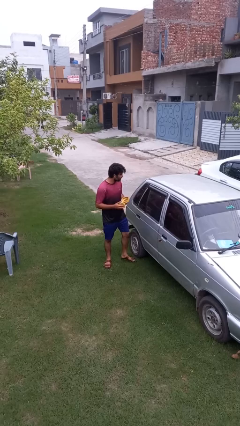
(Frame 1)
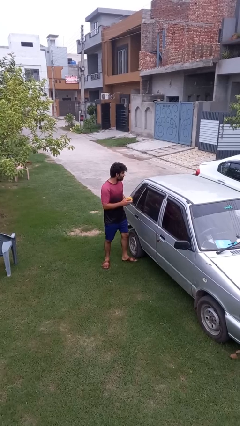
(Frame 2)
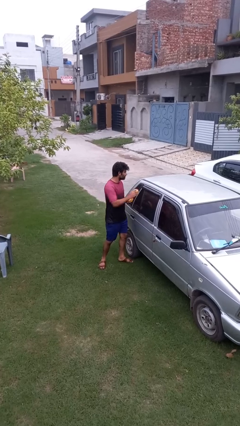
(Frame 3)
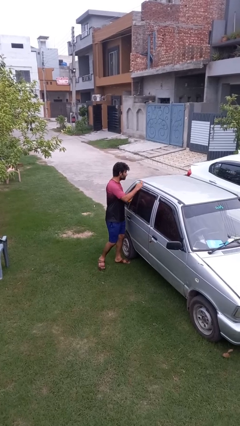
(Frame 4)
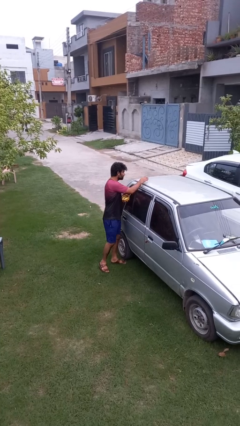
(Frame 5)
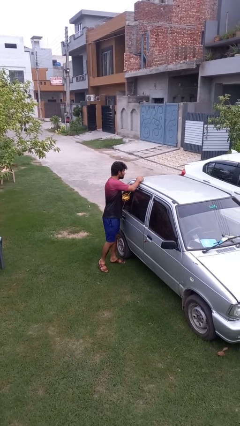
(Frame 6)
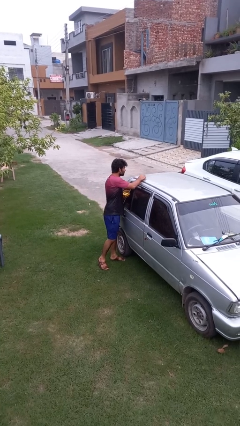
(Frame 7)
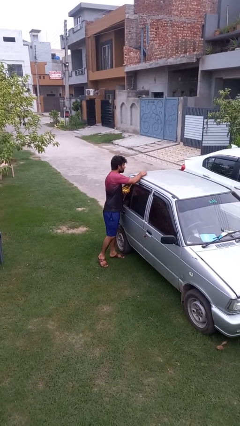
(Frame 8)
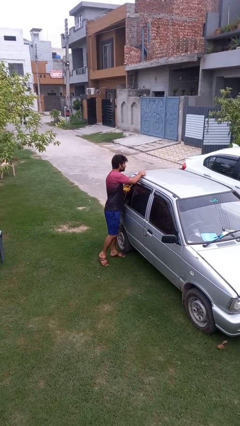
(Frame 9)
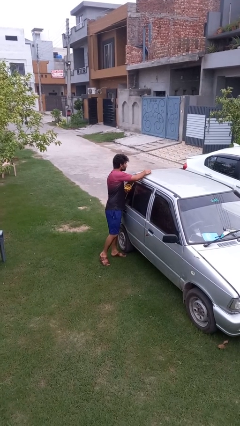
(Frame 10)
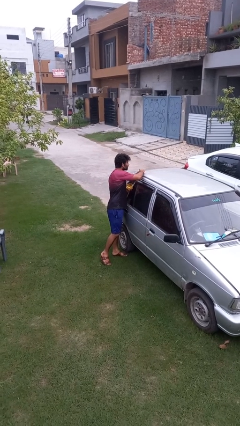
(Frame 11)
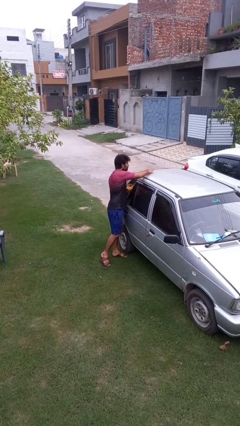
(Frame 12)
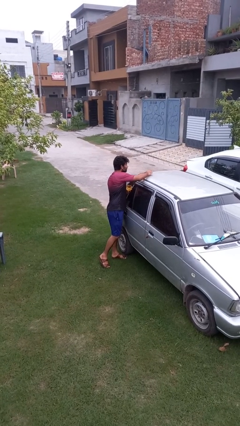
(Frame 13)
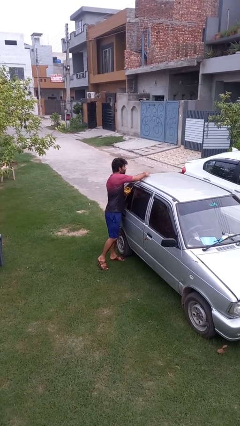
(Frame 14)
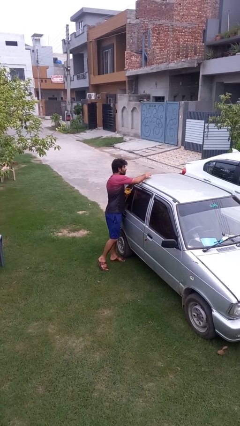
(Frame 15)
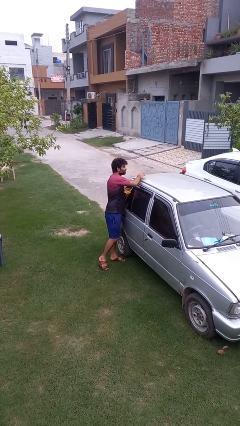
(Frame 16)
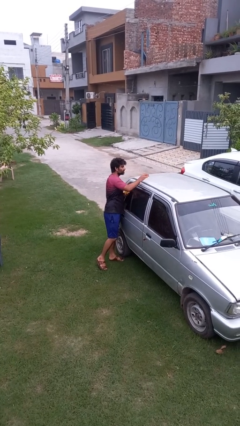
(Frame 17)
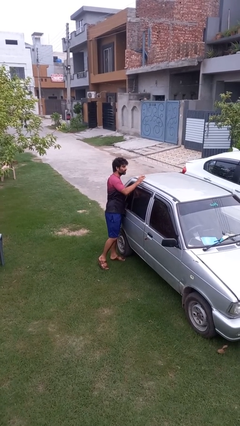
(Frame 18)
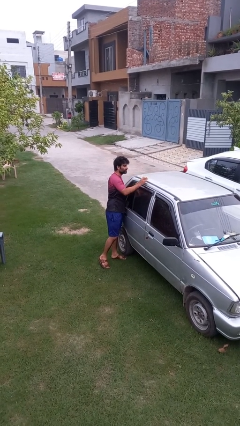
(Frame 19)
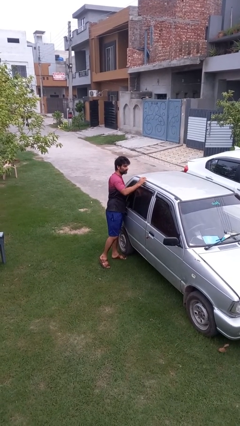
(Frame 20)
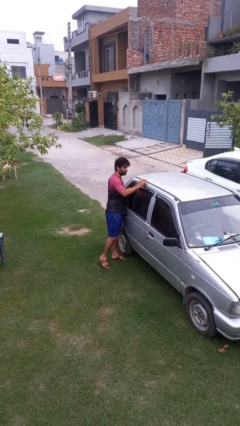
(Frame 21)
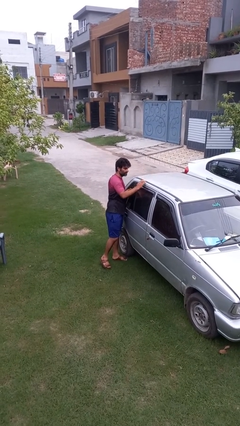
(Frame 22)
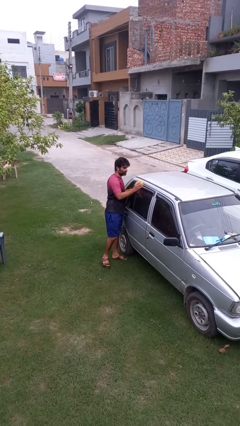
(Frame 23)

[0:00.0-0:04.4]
person polishes car with rag

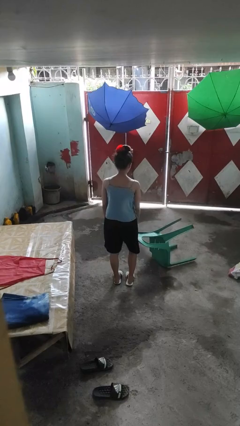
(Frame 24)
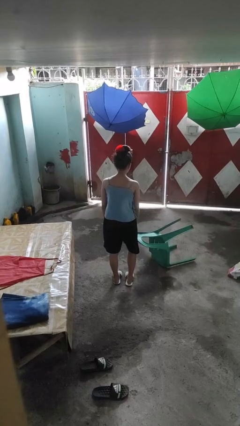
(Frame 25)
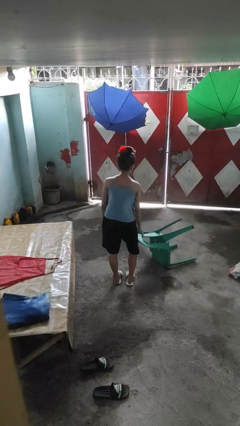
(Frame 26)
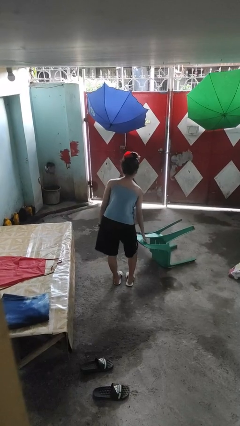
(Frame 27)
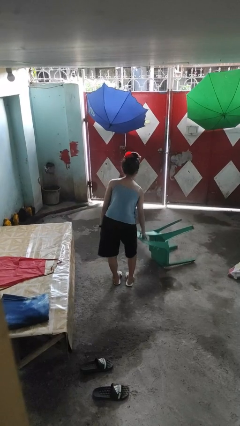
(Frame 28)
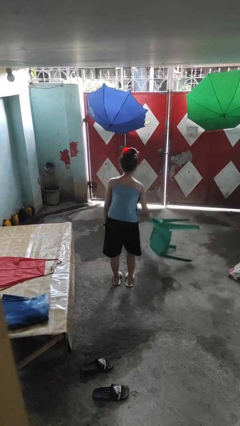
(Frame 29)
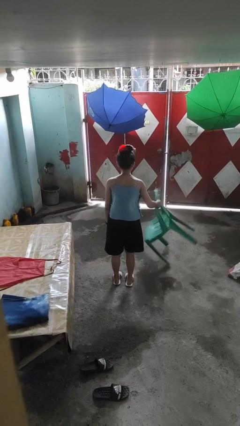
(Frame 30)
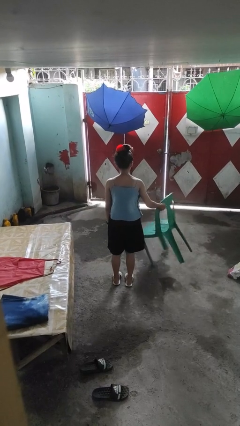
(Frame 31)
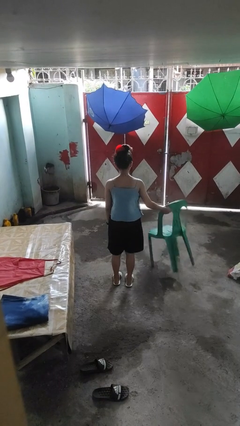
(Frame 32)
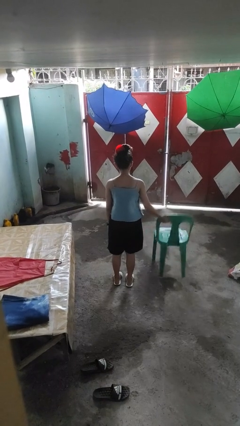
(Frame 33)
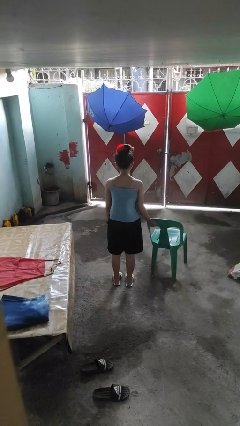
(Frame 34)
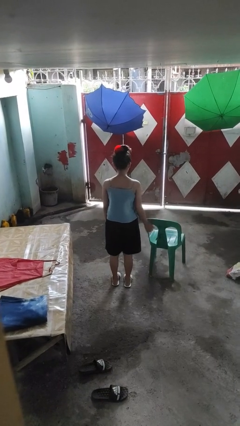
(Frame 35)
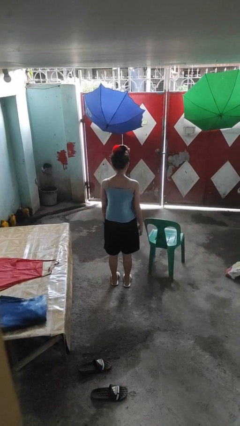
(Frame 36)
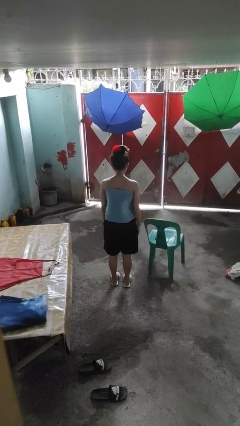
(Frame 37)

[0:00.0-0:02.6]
person sets upright furniture

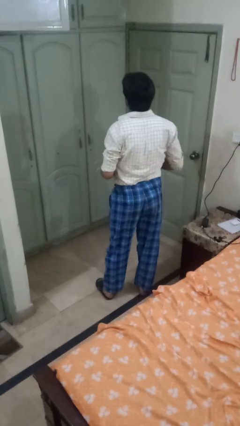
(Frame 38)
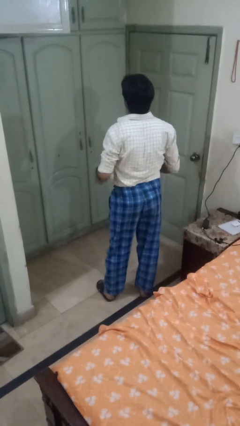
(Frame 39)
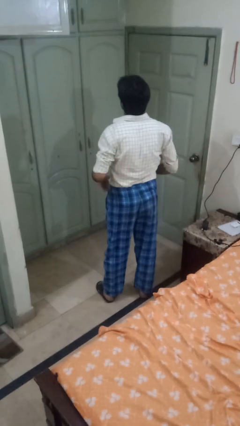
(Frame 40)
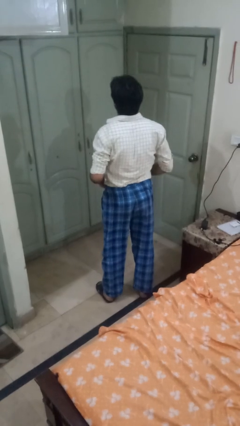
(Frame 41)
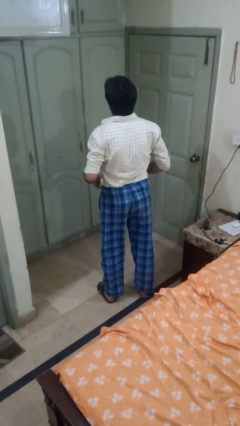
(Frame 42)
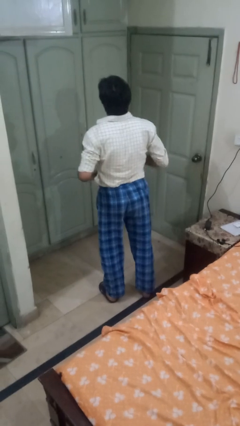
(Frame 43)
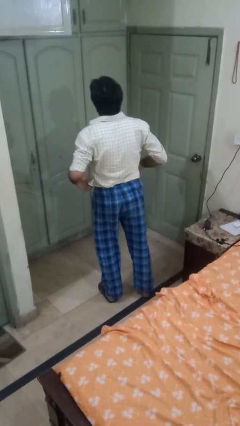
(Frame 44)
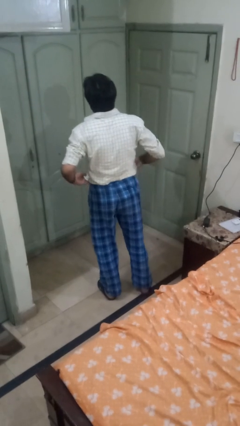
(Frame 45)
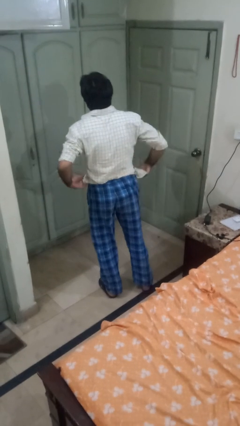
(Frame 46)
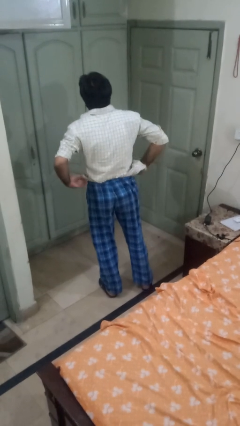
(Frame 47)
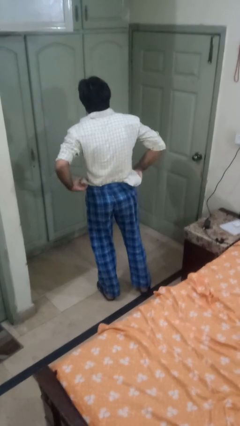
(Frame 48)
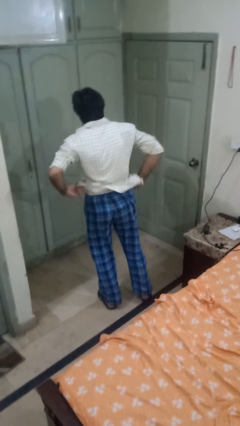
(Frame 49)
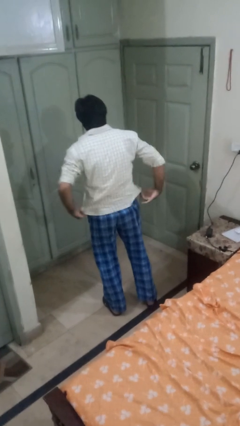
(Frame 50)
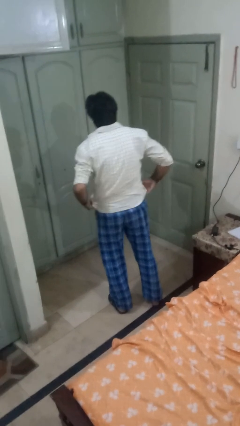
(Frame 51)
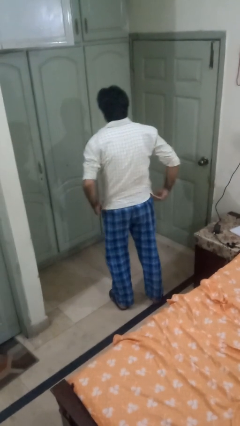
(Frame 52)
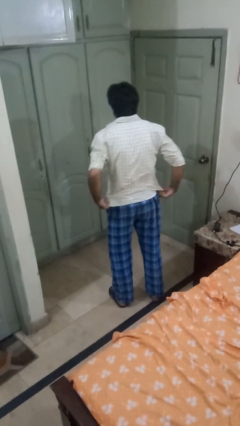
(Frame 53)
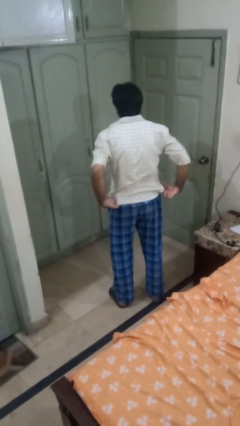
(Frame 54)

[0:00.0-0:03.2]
person untucks shirt

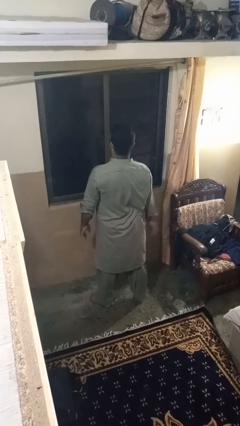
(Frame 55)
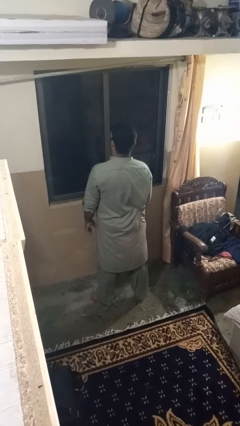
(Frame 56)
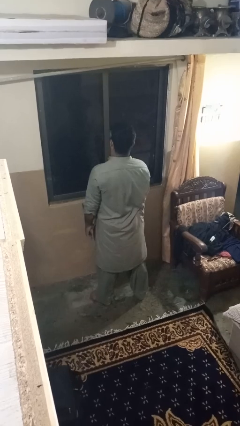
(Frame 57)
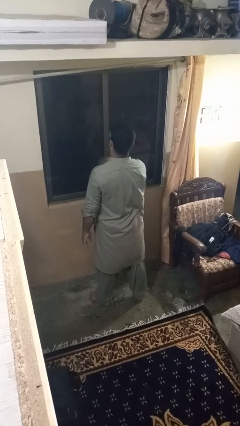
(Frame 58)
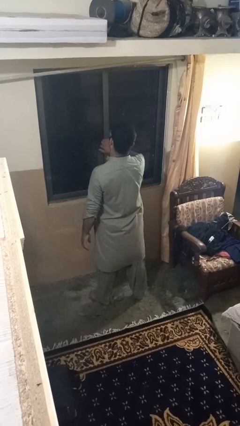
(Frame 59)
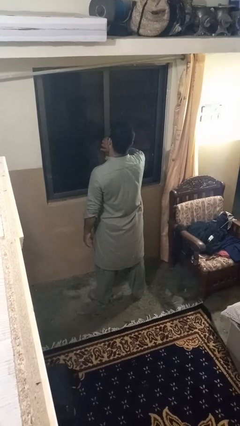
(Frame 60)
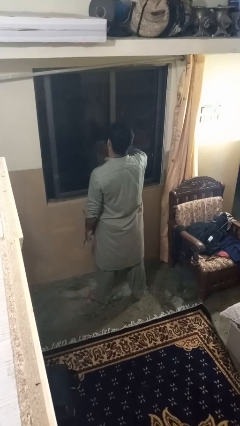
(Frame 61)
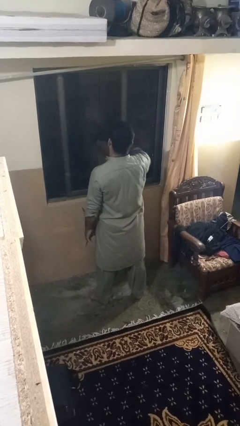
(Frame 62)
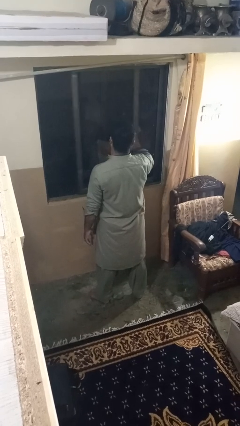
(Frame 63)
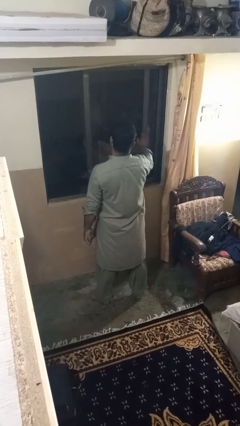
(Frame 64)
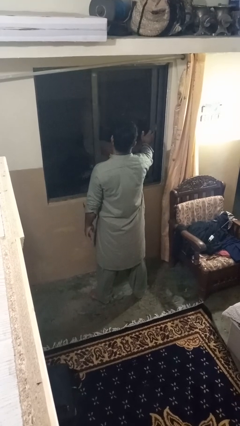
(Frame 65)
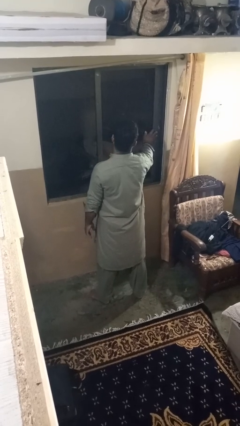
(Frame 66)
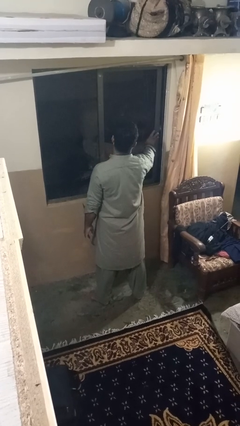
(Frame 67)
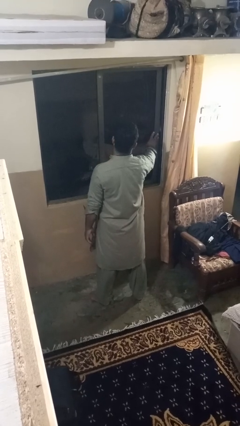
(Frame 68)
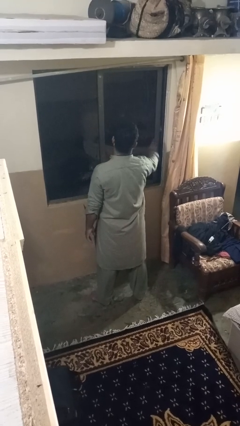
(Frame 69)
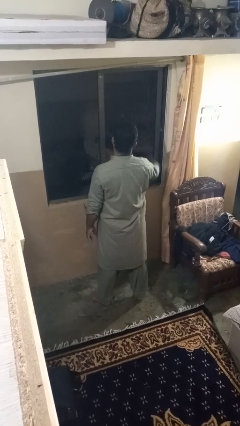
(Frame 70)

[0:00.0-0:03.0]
person opens home window

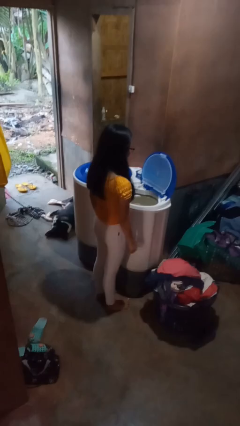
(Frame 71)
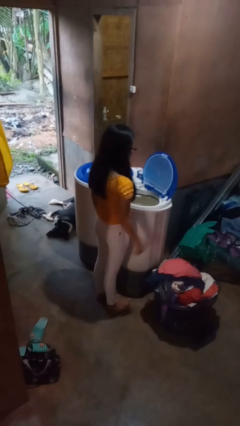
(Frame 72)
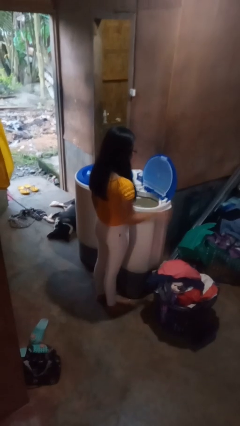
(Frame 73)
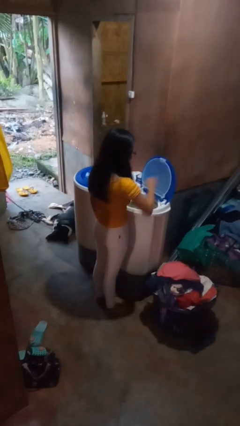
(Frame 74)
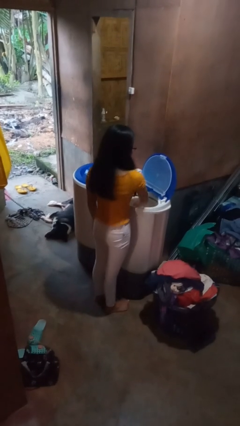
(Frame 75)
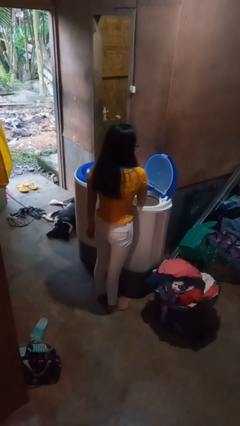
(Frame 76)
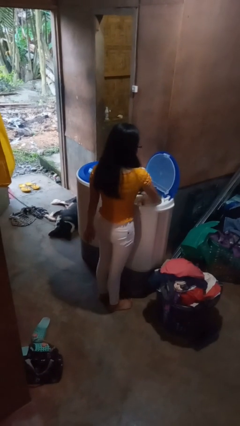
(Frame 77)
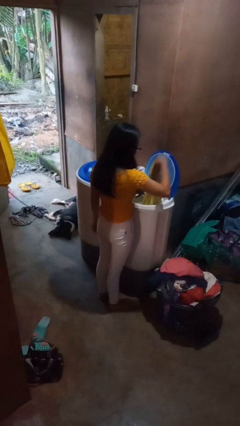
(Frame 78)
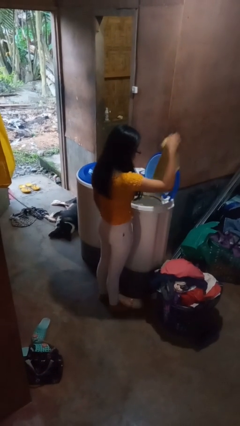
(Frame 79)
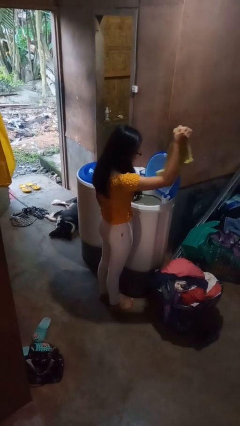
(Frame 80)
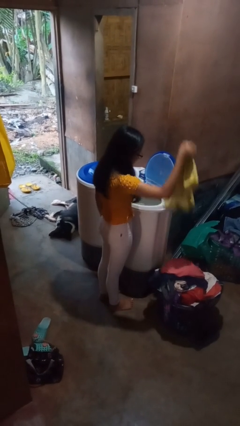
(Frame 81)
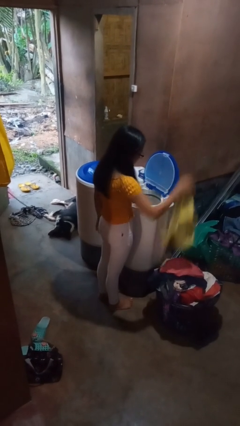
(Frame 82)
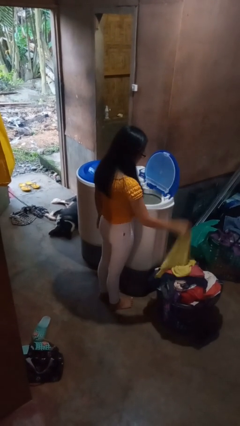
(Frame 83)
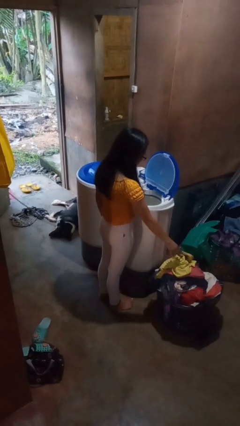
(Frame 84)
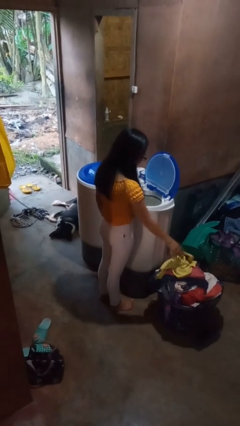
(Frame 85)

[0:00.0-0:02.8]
person unloads dryer

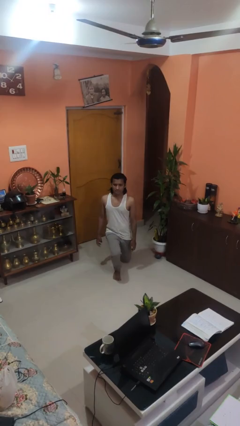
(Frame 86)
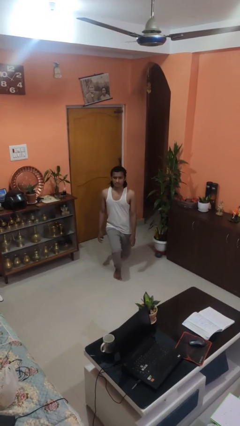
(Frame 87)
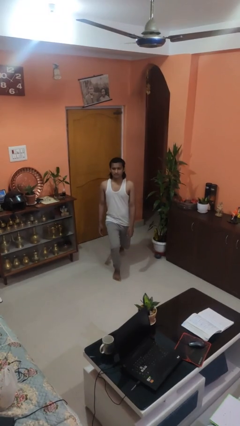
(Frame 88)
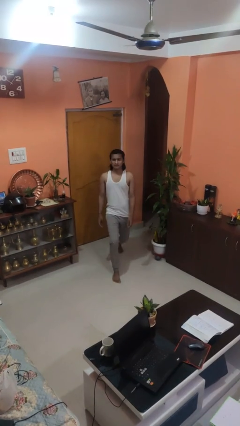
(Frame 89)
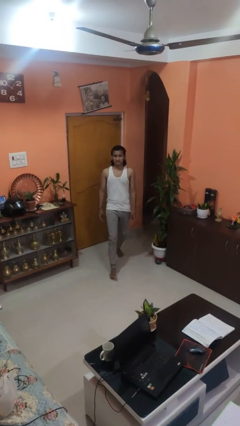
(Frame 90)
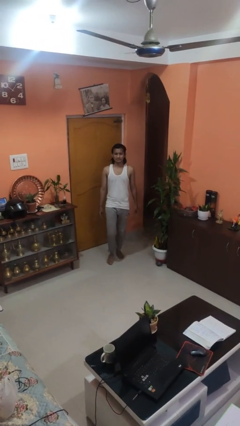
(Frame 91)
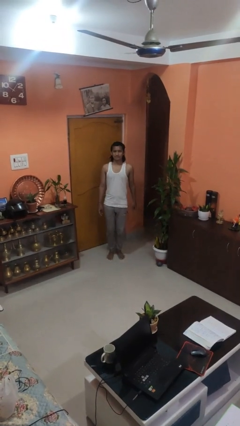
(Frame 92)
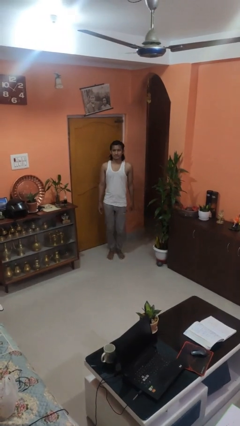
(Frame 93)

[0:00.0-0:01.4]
person stands up from floor
